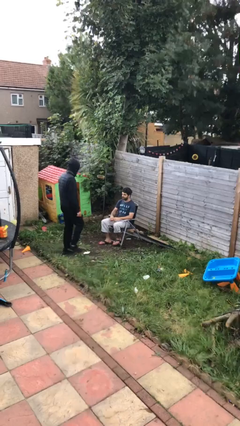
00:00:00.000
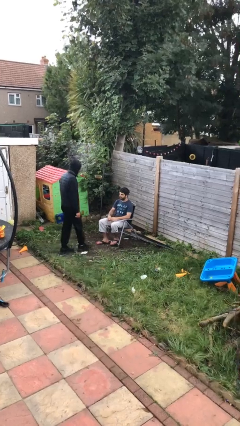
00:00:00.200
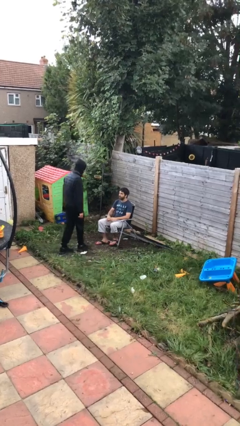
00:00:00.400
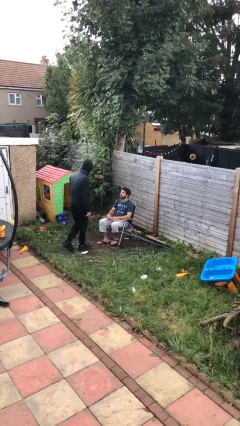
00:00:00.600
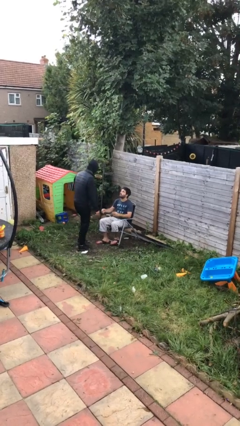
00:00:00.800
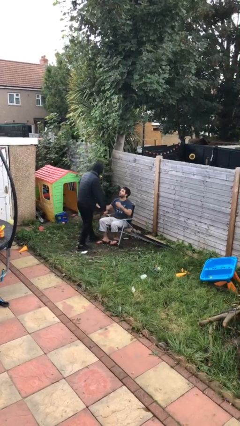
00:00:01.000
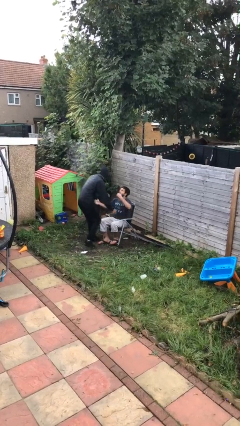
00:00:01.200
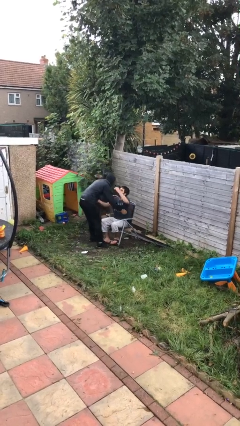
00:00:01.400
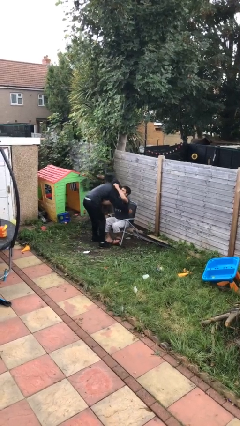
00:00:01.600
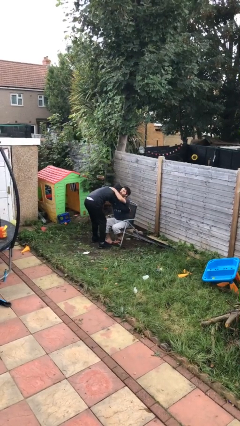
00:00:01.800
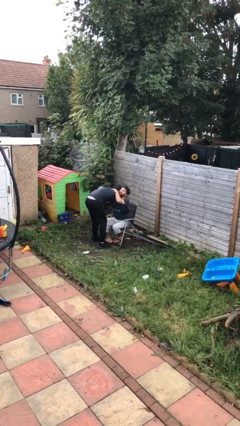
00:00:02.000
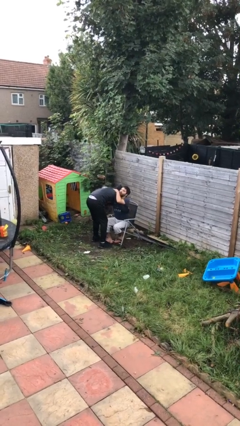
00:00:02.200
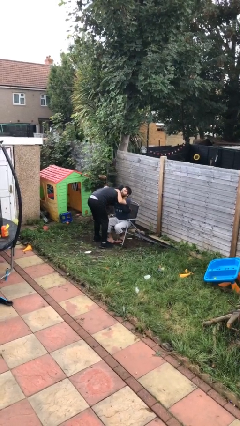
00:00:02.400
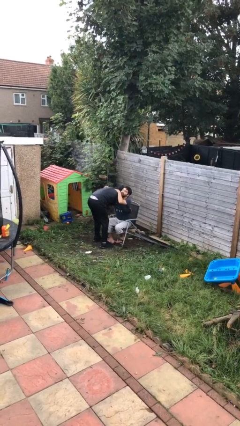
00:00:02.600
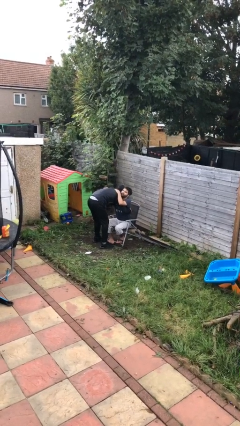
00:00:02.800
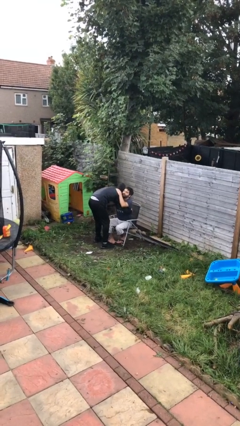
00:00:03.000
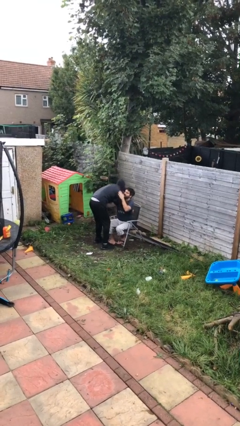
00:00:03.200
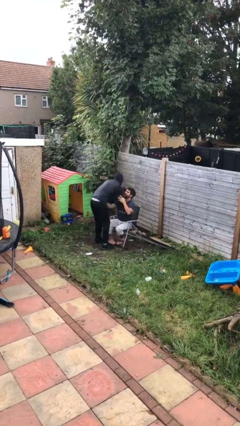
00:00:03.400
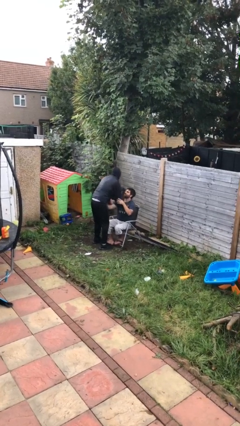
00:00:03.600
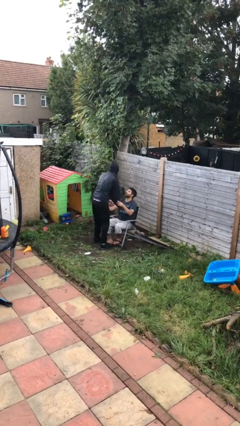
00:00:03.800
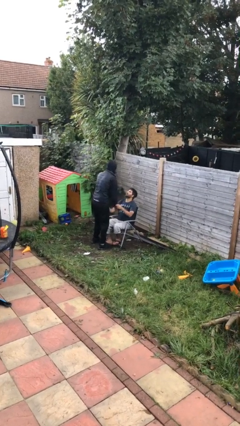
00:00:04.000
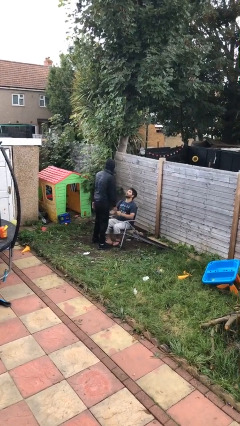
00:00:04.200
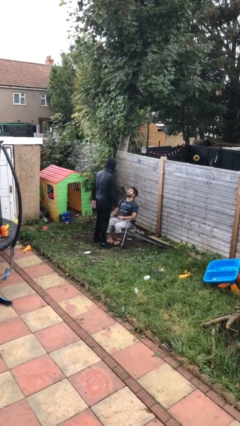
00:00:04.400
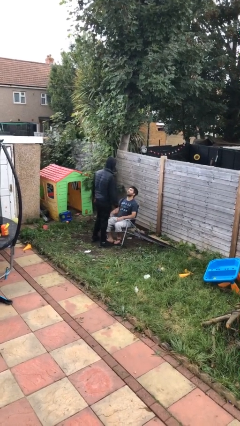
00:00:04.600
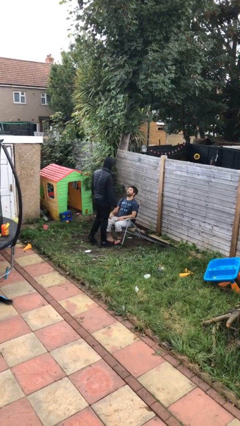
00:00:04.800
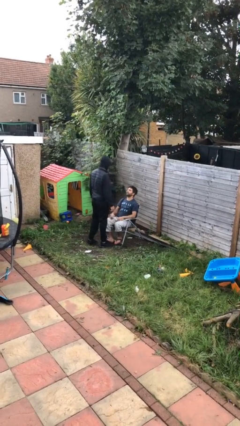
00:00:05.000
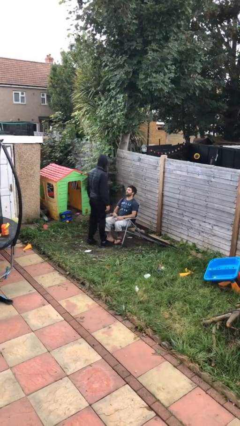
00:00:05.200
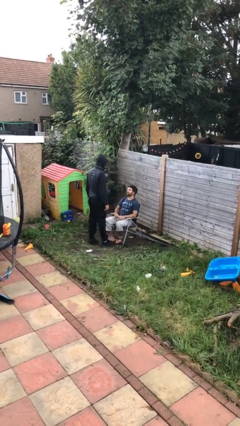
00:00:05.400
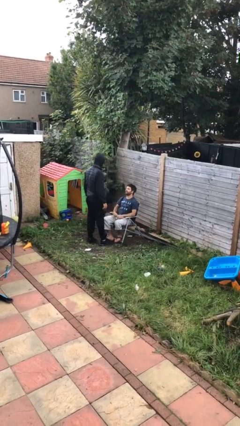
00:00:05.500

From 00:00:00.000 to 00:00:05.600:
person embraces person

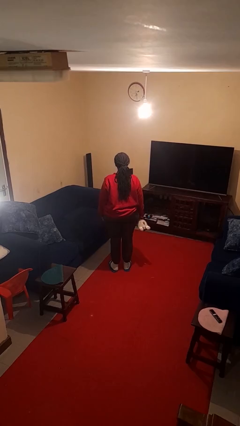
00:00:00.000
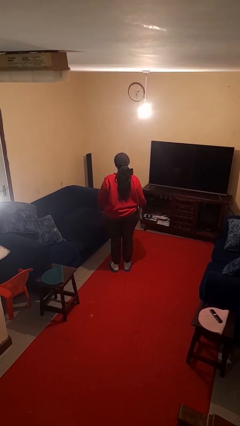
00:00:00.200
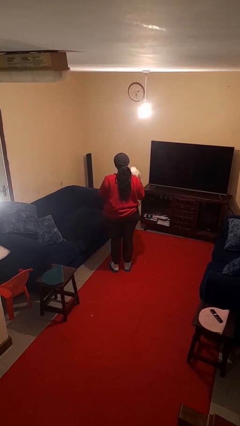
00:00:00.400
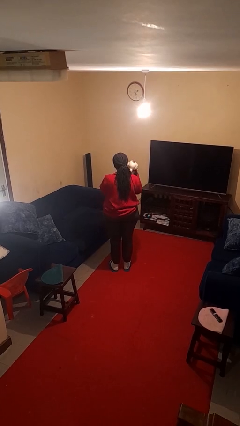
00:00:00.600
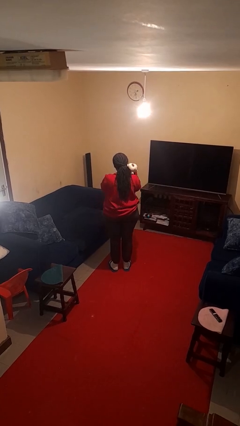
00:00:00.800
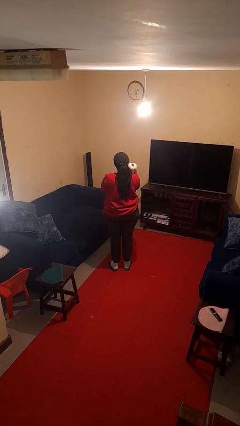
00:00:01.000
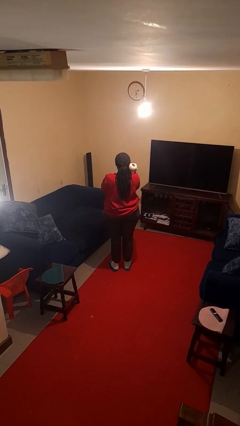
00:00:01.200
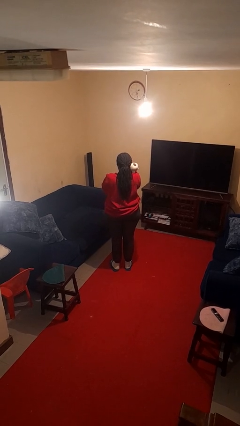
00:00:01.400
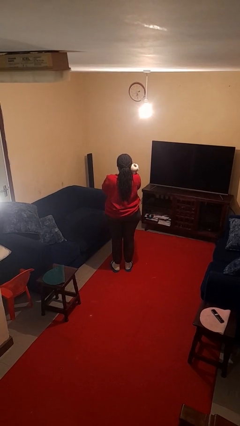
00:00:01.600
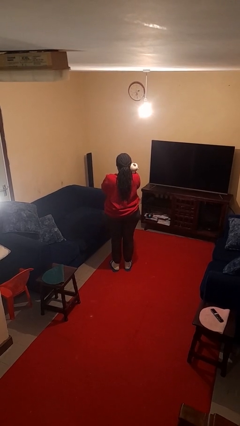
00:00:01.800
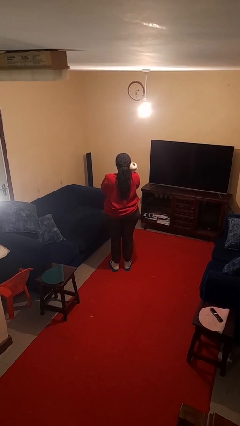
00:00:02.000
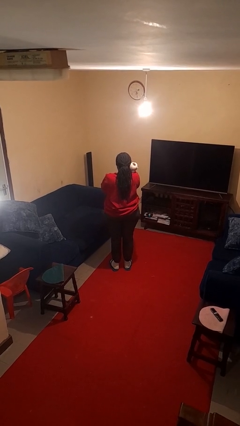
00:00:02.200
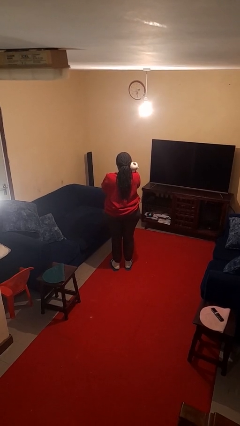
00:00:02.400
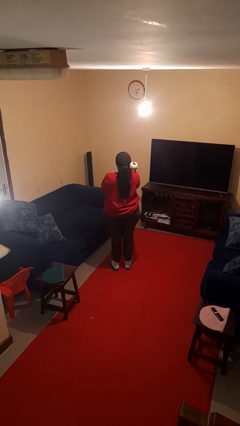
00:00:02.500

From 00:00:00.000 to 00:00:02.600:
person hugs stuffed animal

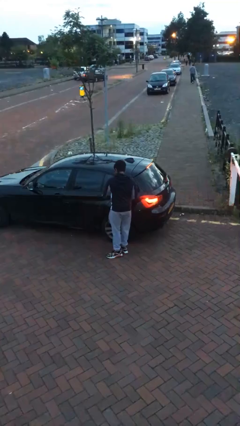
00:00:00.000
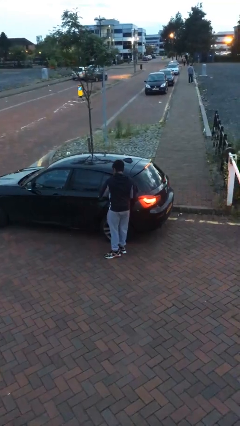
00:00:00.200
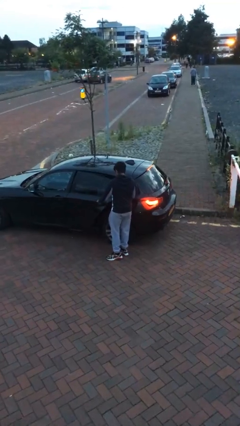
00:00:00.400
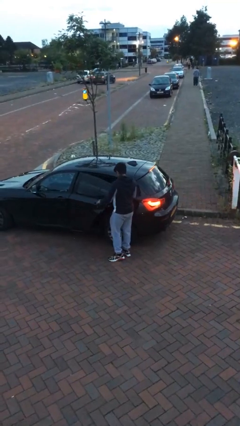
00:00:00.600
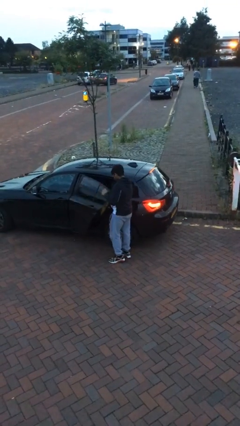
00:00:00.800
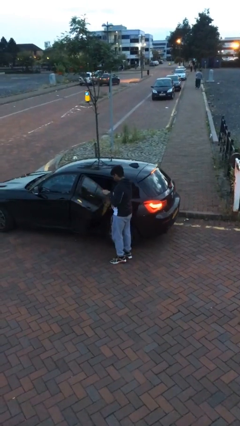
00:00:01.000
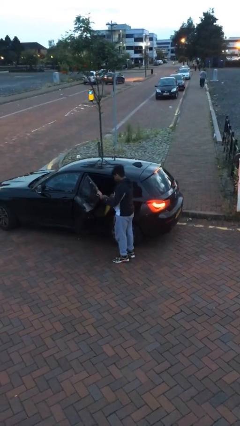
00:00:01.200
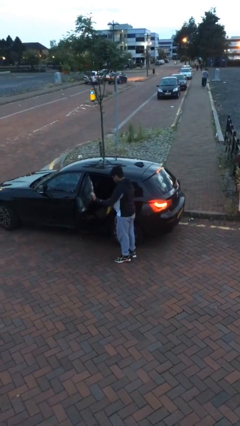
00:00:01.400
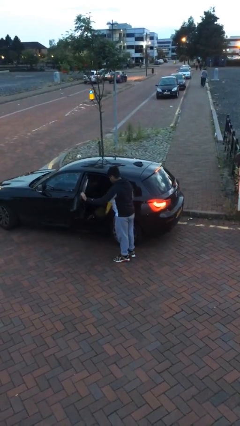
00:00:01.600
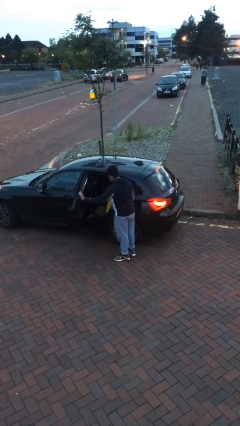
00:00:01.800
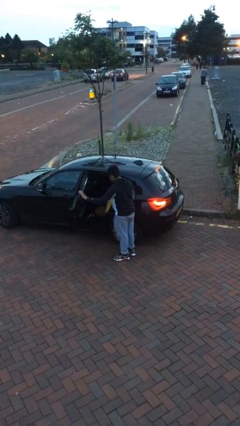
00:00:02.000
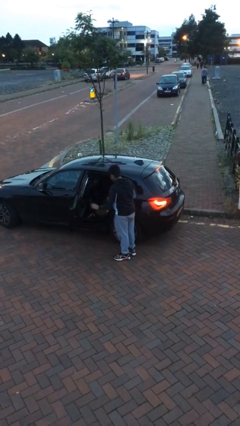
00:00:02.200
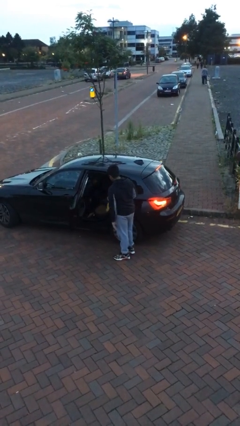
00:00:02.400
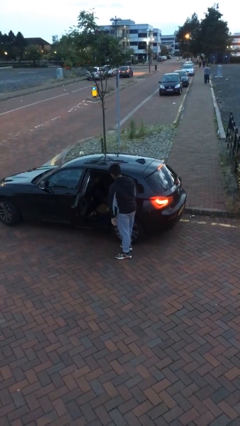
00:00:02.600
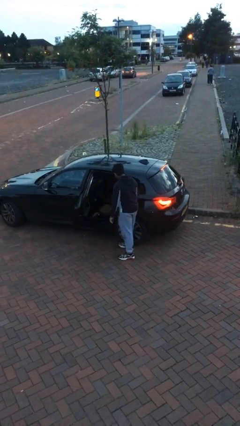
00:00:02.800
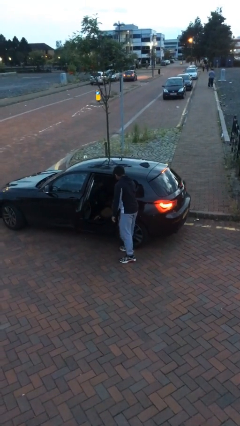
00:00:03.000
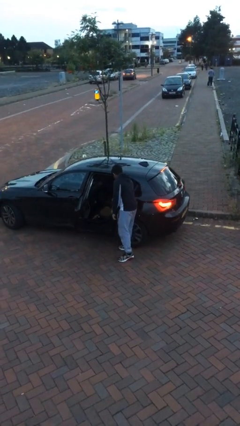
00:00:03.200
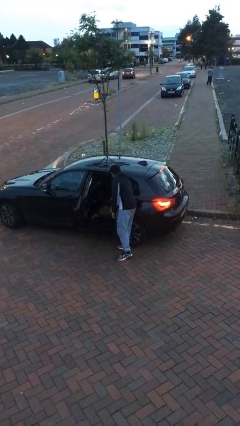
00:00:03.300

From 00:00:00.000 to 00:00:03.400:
person opens car door

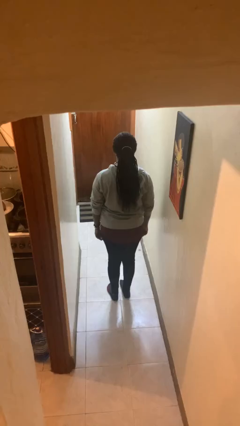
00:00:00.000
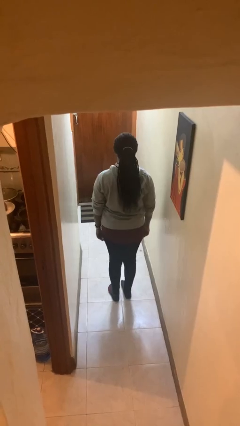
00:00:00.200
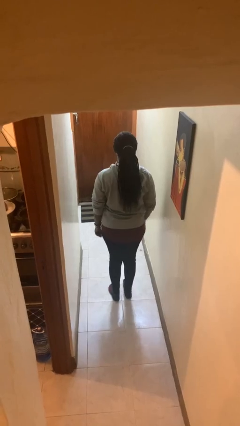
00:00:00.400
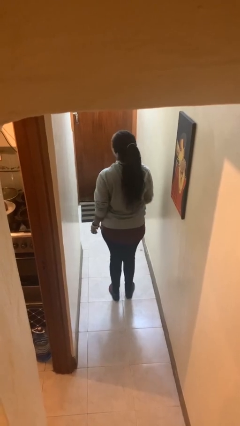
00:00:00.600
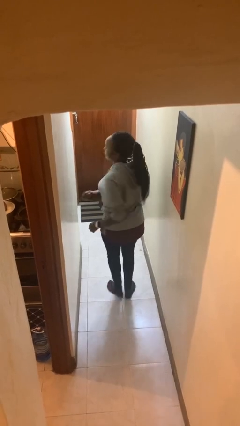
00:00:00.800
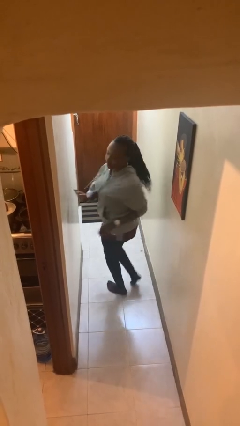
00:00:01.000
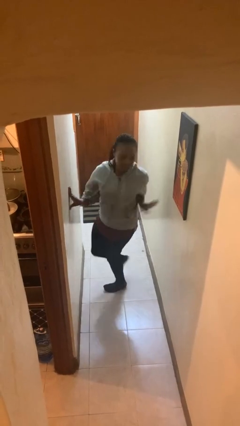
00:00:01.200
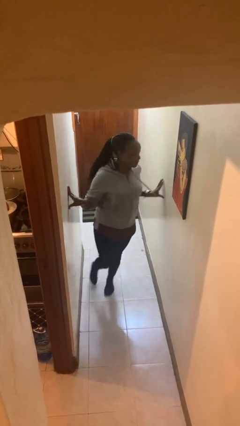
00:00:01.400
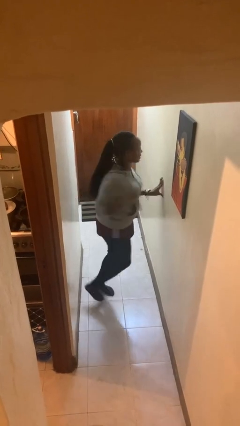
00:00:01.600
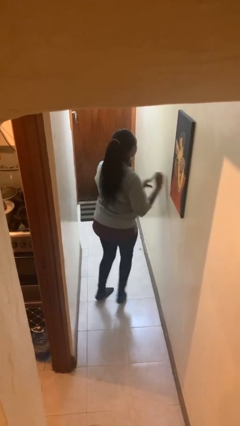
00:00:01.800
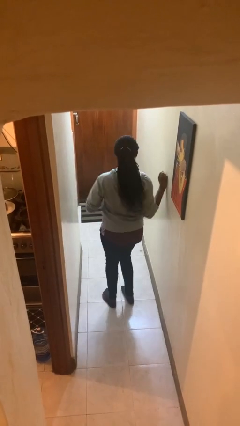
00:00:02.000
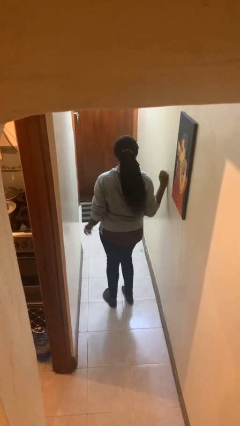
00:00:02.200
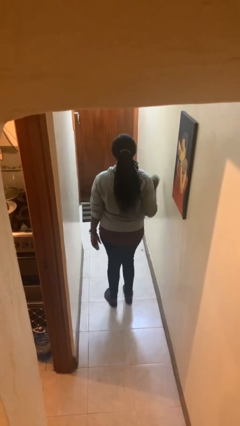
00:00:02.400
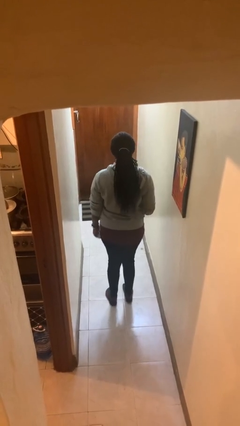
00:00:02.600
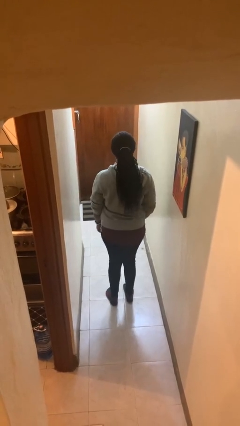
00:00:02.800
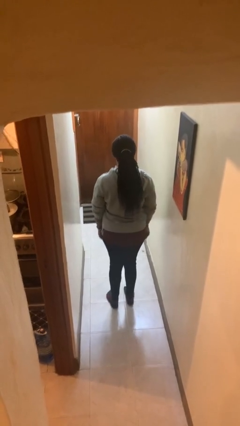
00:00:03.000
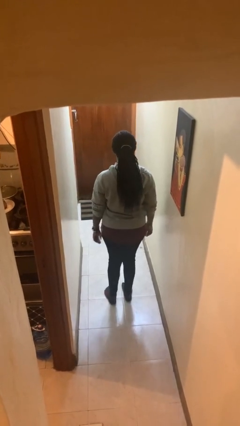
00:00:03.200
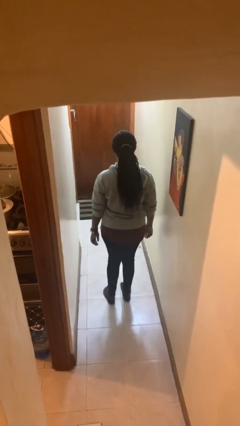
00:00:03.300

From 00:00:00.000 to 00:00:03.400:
person twirls

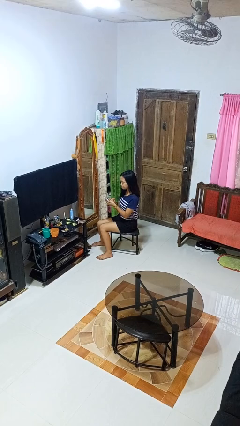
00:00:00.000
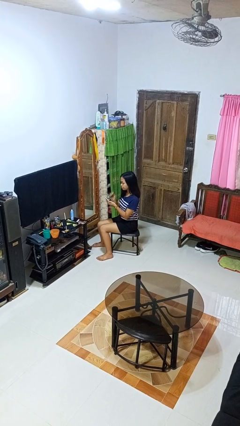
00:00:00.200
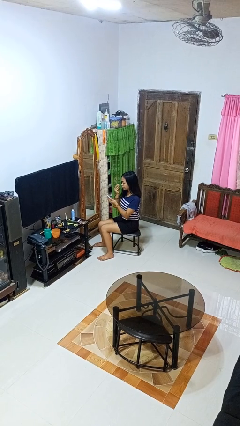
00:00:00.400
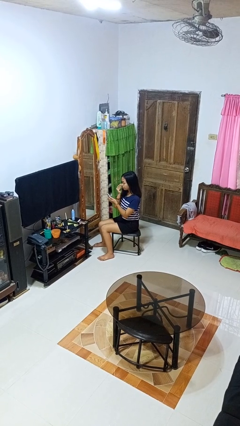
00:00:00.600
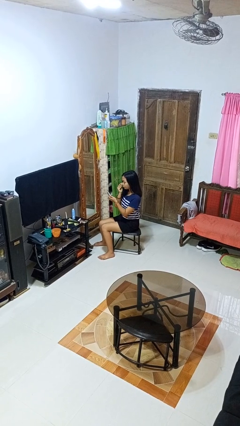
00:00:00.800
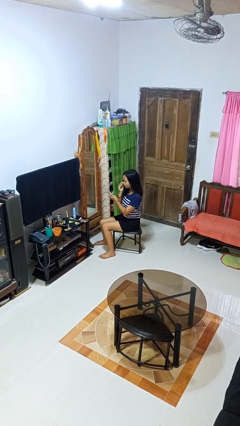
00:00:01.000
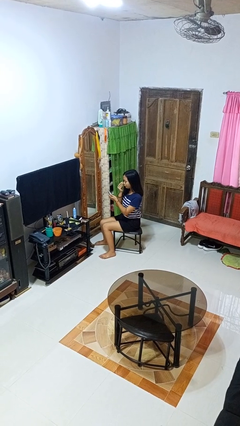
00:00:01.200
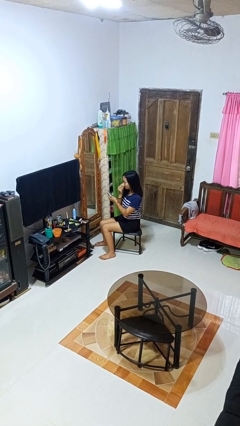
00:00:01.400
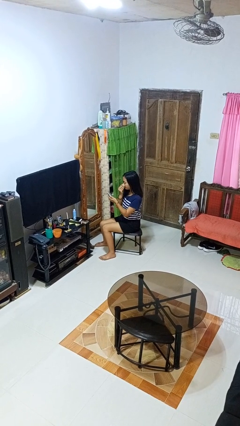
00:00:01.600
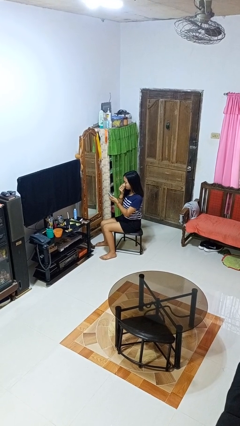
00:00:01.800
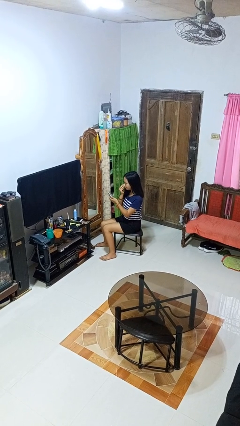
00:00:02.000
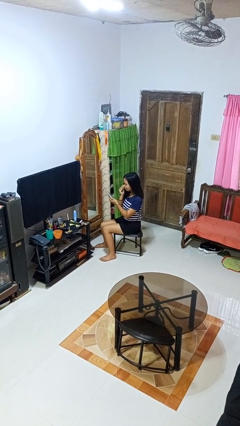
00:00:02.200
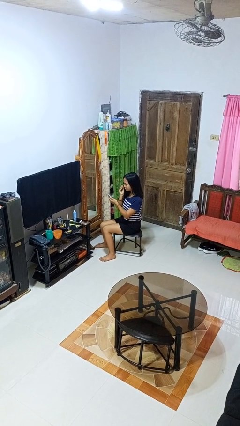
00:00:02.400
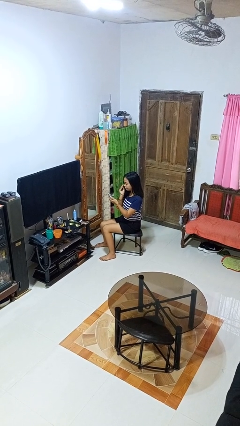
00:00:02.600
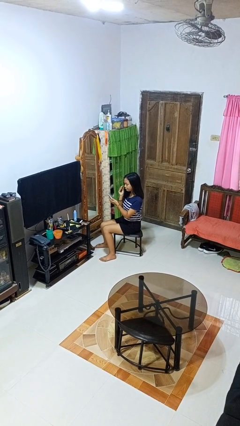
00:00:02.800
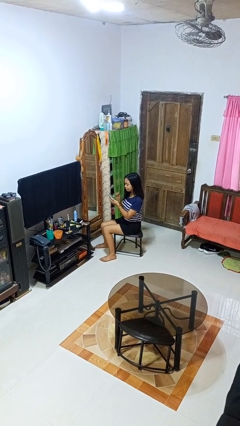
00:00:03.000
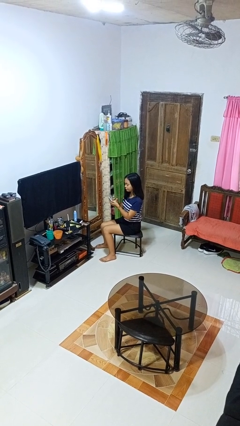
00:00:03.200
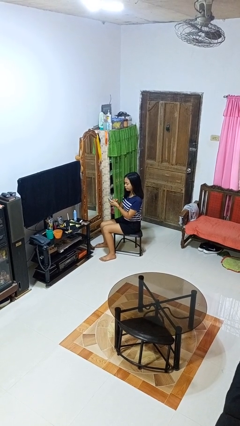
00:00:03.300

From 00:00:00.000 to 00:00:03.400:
person applies foundation makeup
